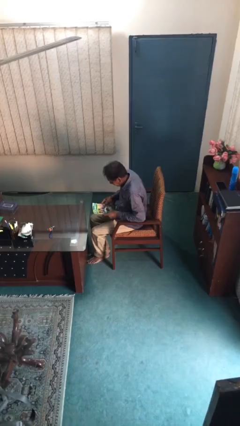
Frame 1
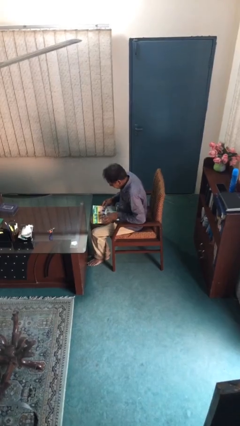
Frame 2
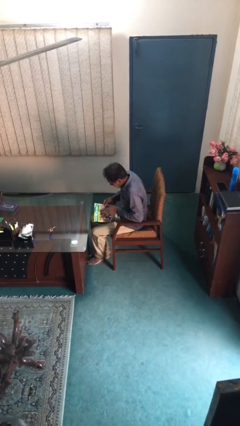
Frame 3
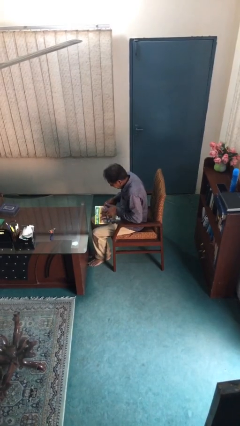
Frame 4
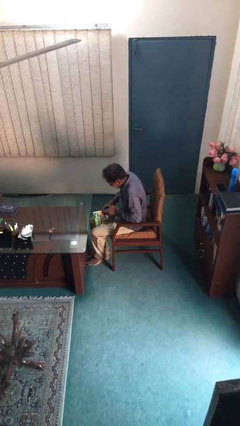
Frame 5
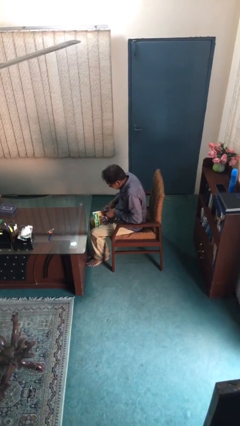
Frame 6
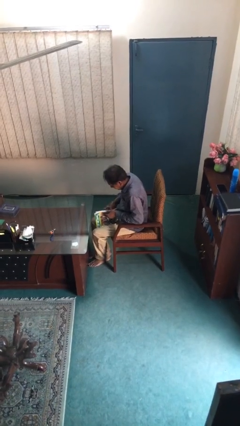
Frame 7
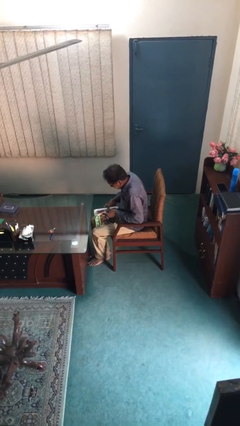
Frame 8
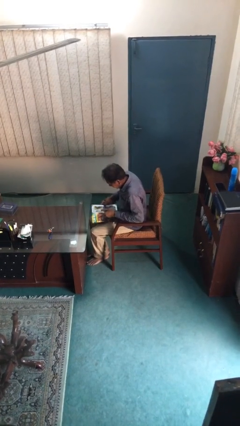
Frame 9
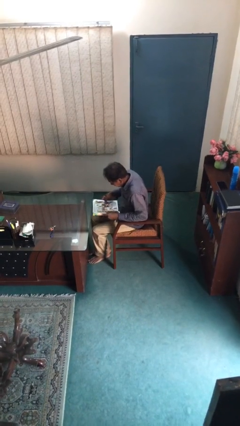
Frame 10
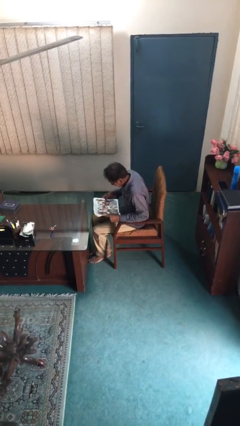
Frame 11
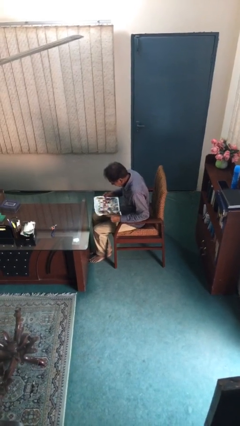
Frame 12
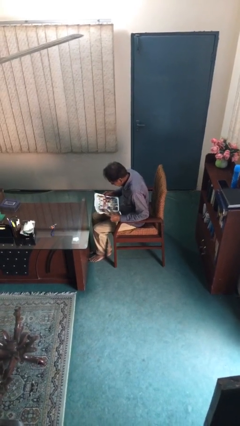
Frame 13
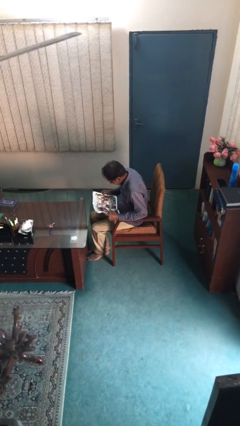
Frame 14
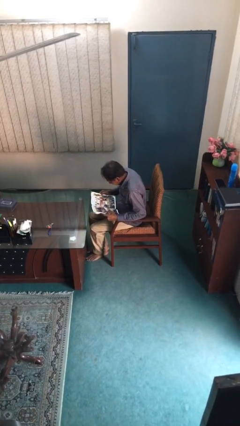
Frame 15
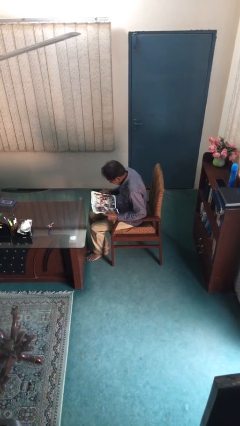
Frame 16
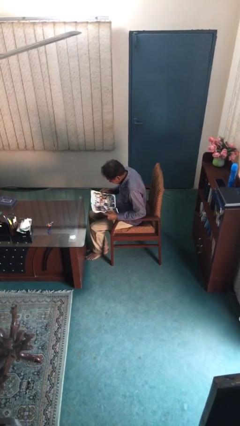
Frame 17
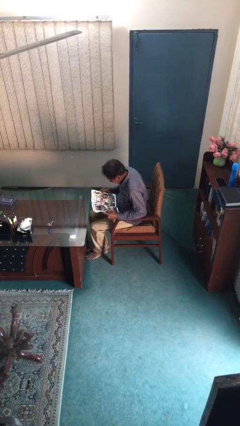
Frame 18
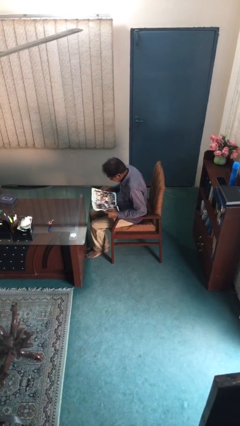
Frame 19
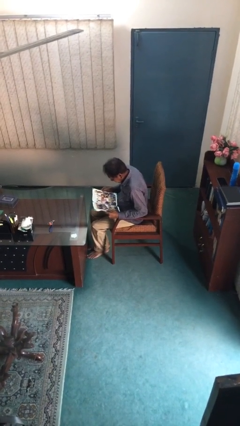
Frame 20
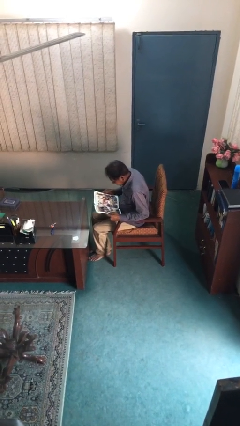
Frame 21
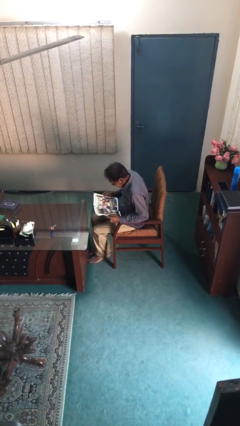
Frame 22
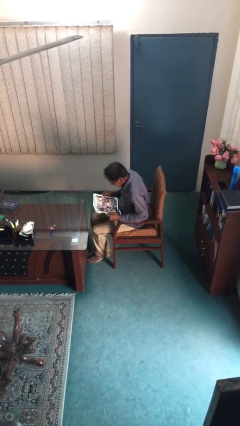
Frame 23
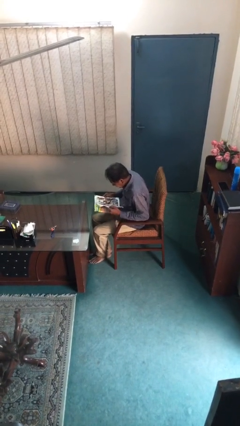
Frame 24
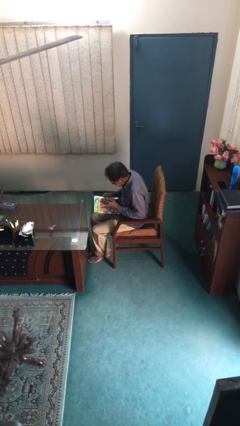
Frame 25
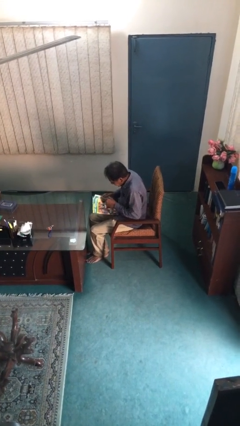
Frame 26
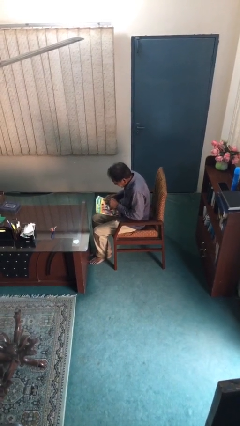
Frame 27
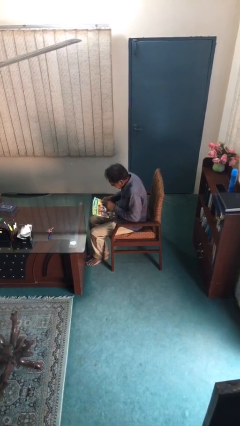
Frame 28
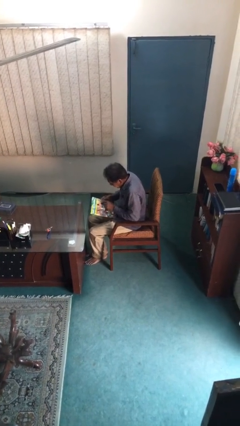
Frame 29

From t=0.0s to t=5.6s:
person reads document

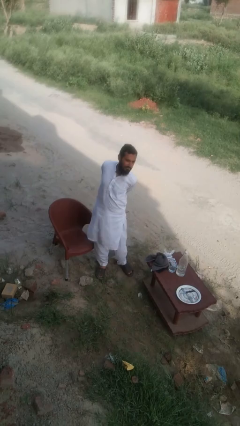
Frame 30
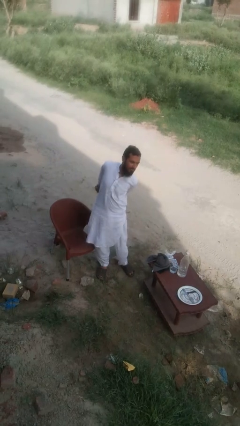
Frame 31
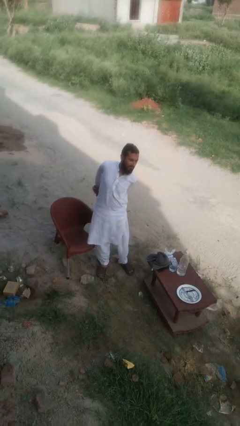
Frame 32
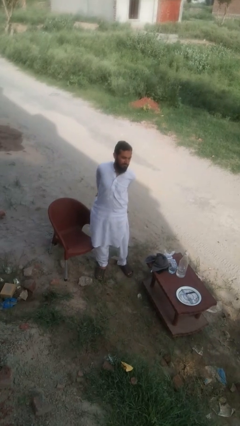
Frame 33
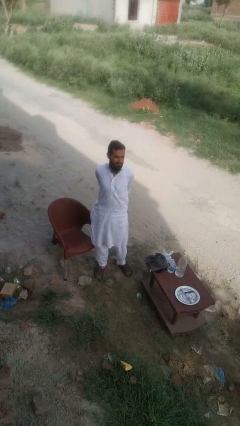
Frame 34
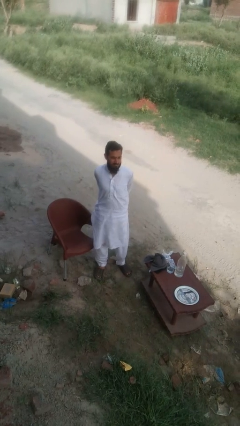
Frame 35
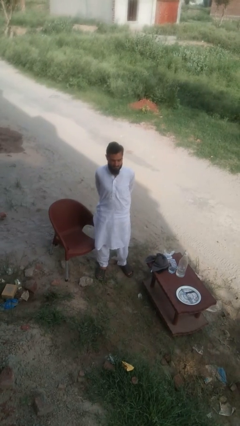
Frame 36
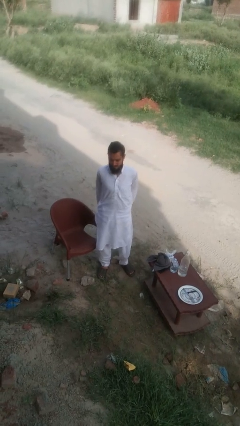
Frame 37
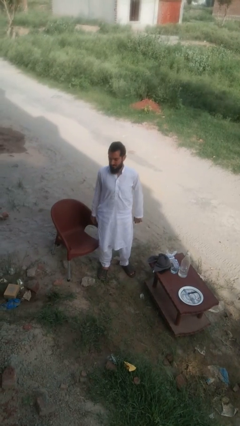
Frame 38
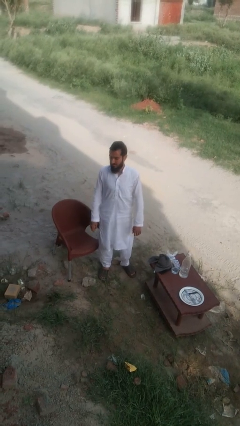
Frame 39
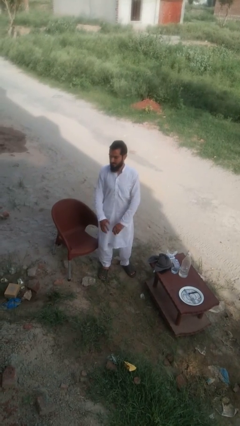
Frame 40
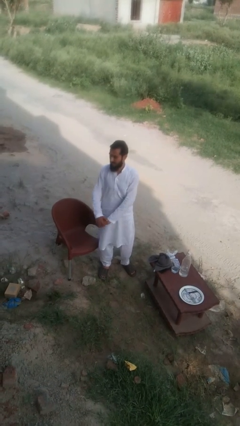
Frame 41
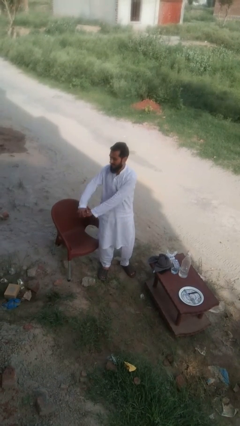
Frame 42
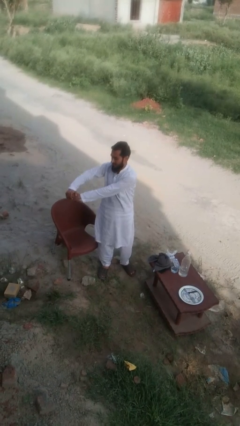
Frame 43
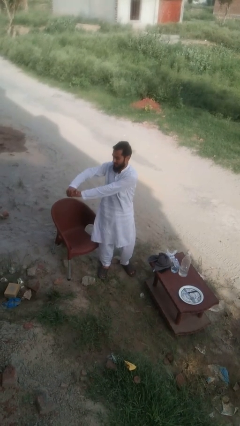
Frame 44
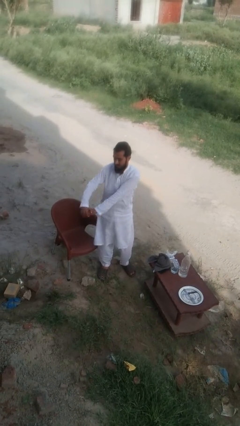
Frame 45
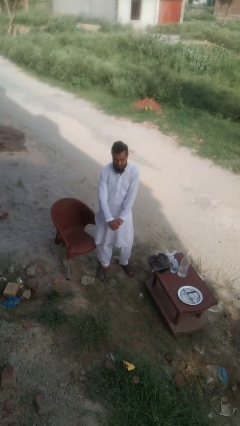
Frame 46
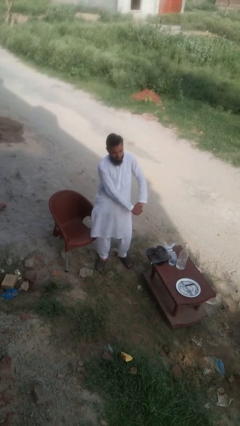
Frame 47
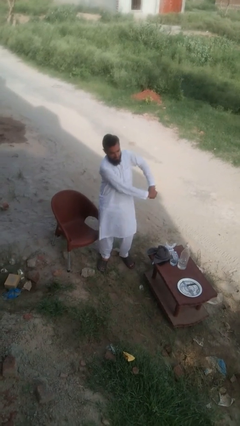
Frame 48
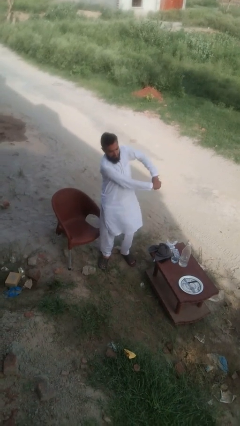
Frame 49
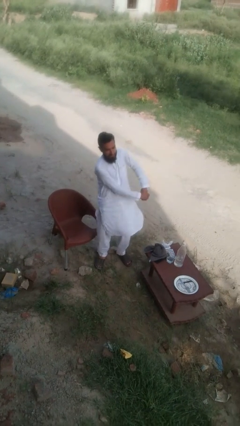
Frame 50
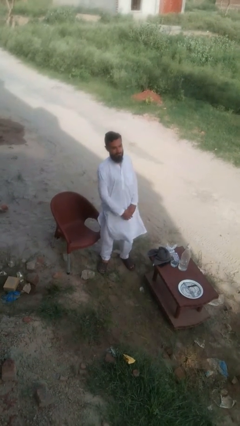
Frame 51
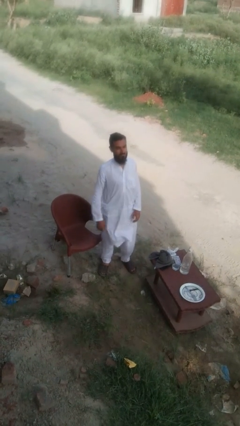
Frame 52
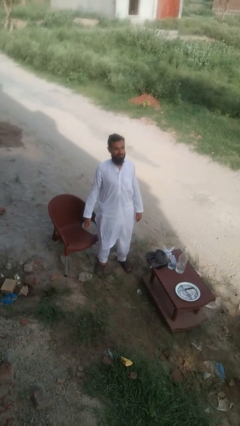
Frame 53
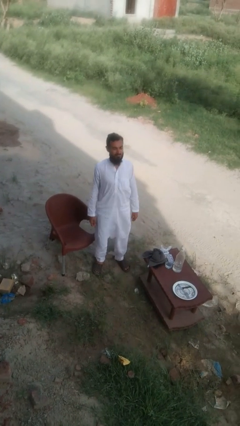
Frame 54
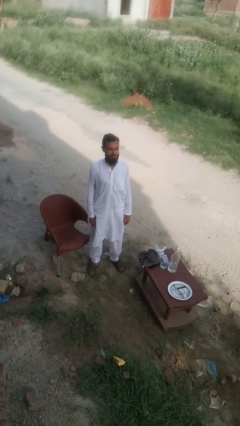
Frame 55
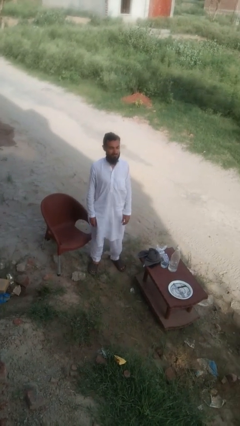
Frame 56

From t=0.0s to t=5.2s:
person stretches arms to side

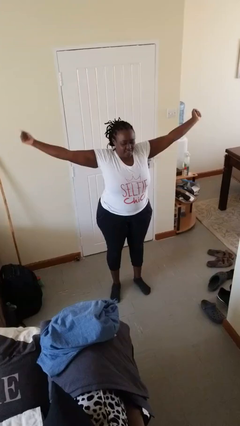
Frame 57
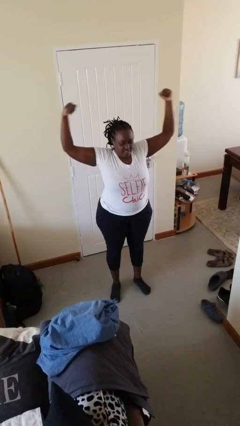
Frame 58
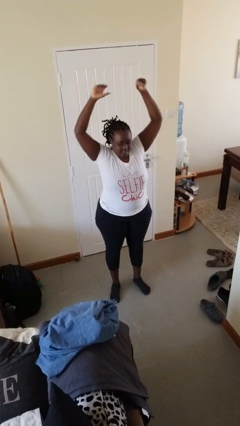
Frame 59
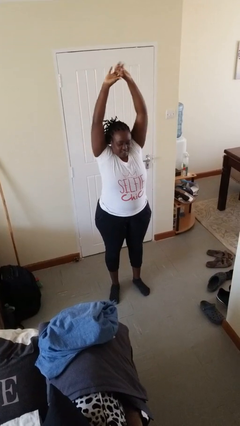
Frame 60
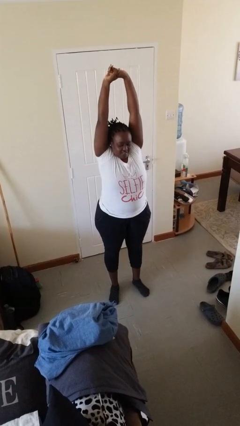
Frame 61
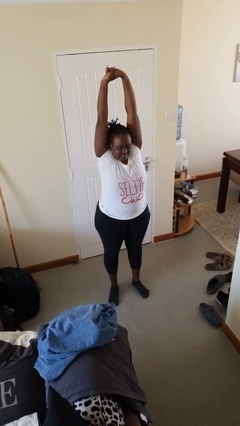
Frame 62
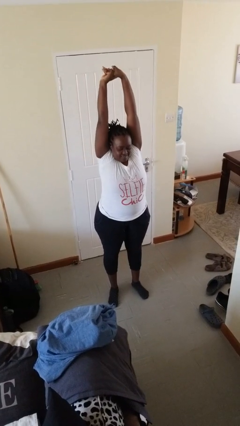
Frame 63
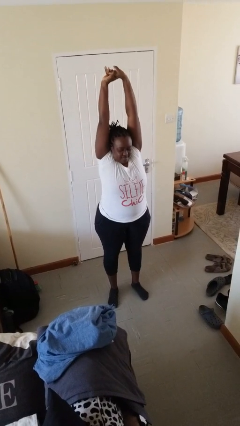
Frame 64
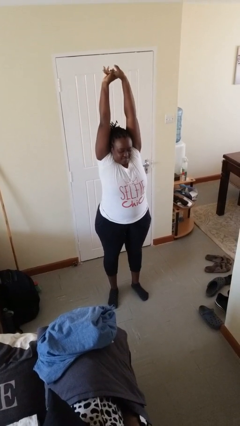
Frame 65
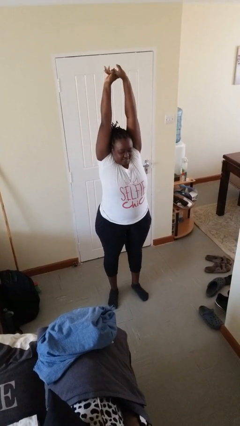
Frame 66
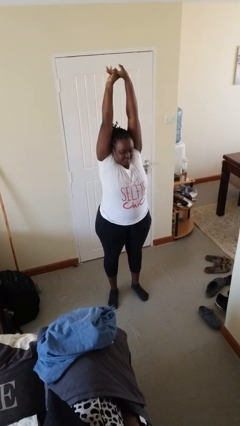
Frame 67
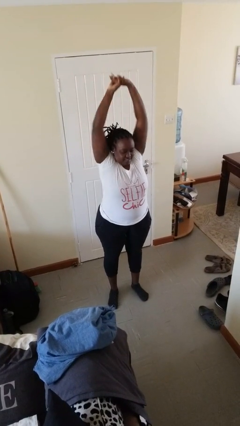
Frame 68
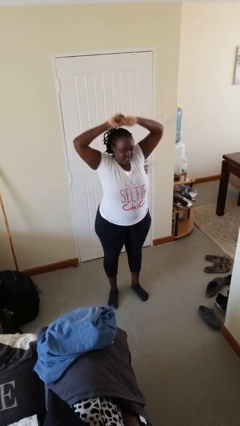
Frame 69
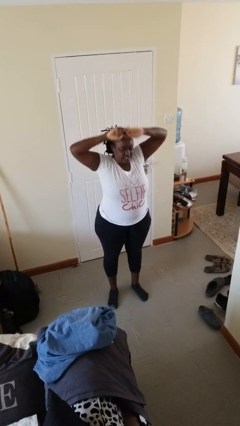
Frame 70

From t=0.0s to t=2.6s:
person stretches arms over head

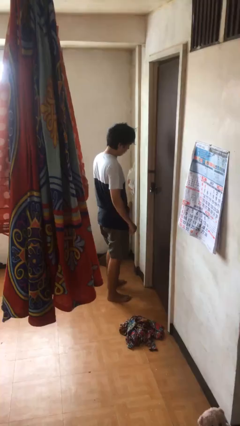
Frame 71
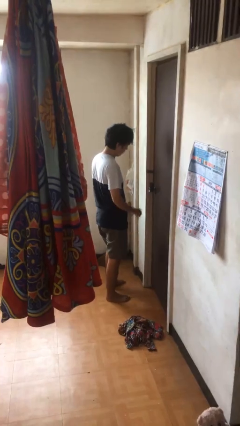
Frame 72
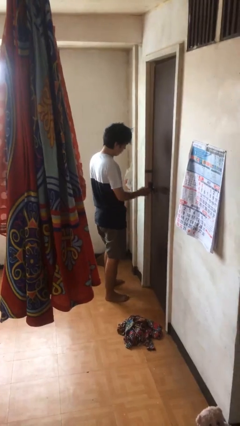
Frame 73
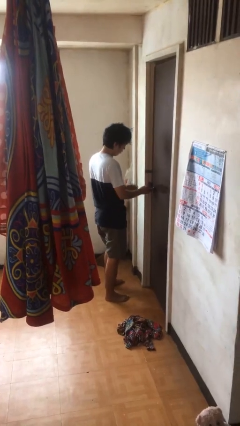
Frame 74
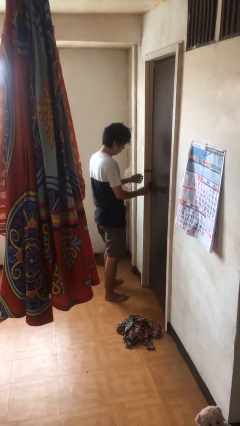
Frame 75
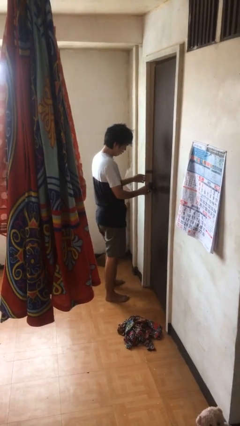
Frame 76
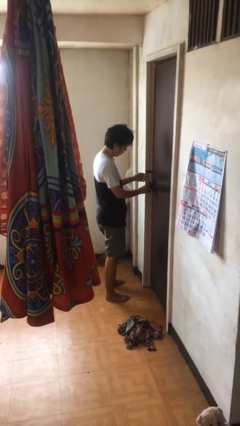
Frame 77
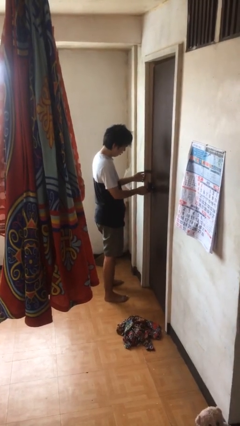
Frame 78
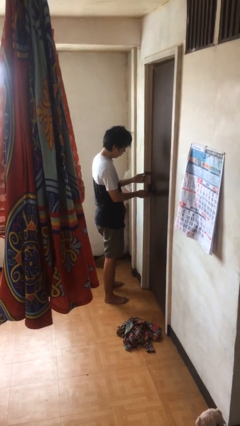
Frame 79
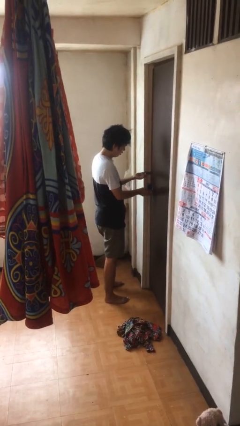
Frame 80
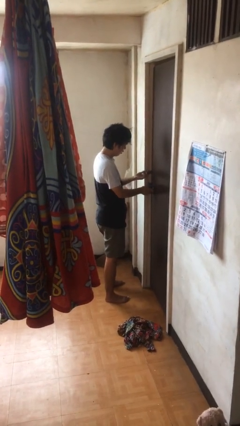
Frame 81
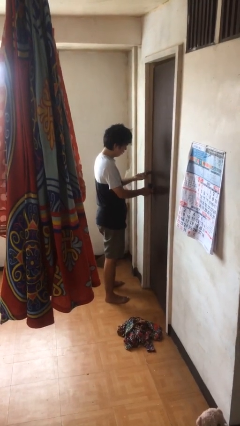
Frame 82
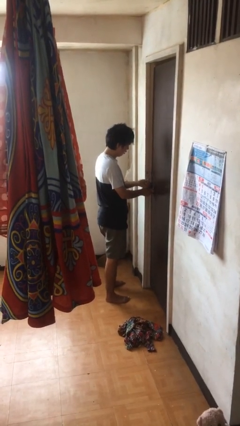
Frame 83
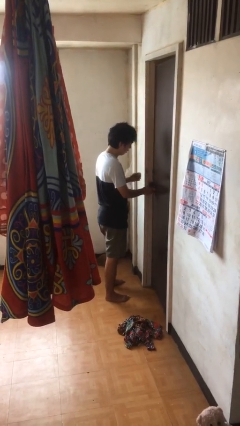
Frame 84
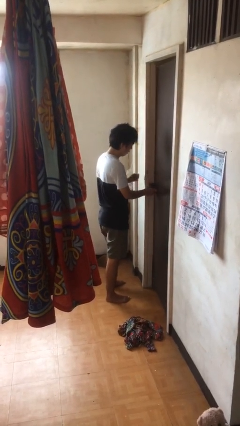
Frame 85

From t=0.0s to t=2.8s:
person unlocks door with keys

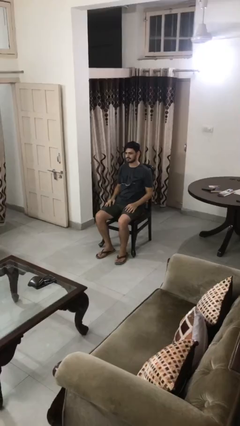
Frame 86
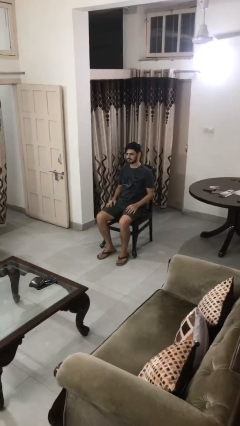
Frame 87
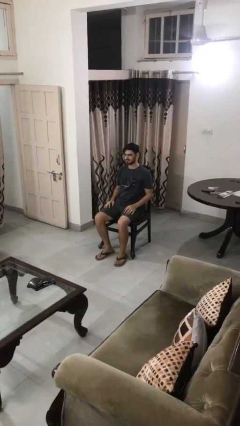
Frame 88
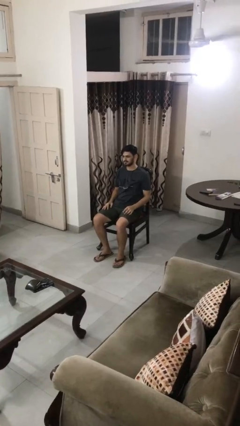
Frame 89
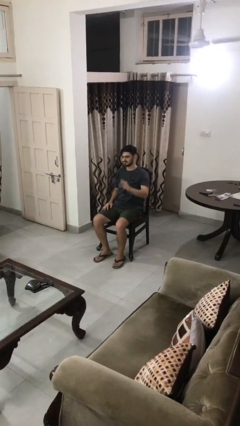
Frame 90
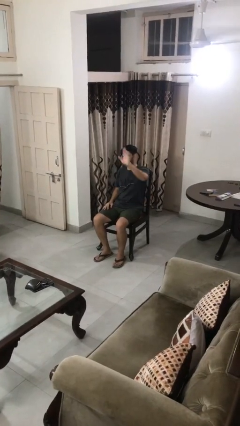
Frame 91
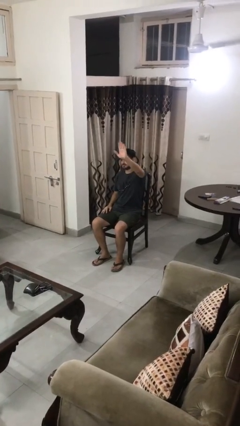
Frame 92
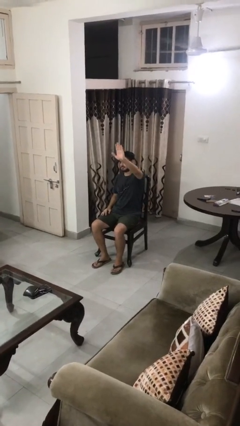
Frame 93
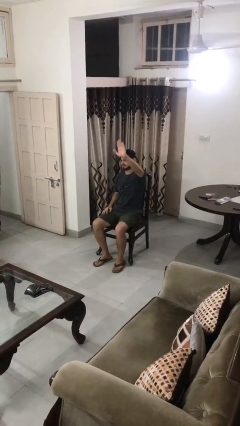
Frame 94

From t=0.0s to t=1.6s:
person gestures raise hand
